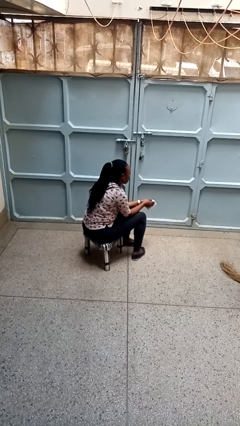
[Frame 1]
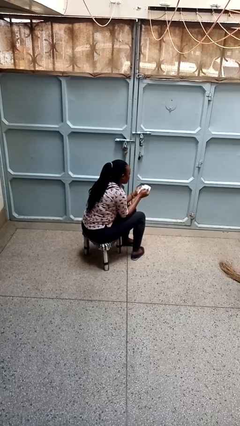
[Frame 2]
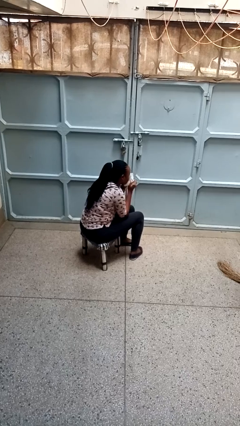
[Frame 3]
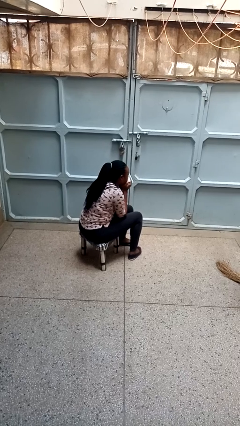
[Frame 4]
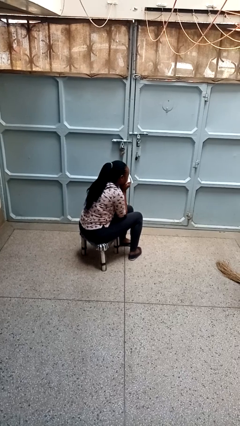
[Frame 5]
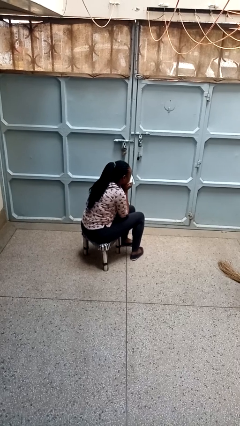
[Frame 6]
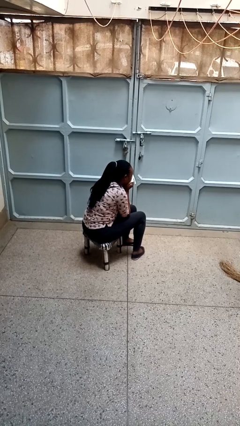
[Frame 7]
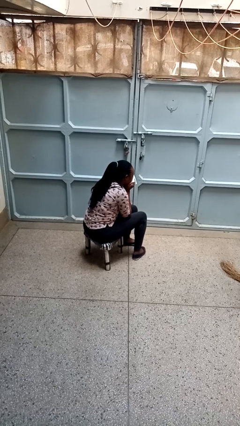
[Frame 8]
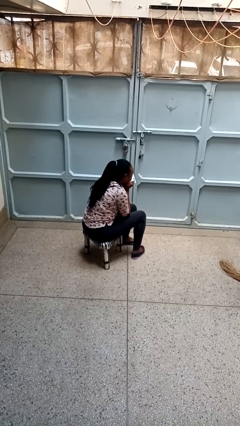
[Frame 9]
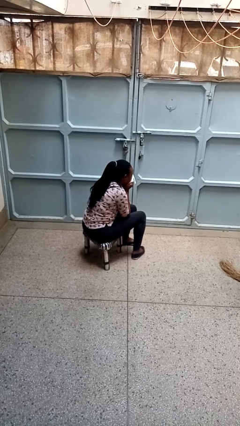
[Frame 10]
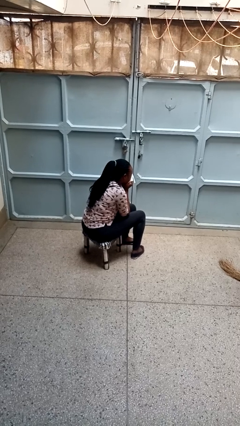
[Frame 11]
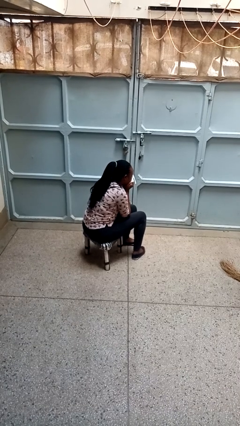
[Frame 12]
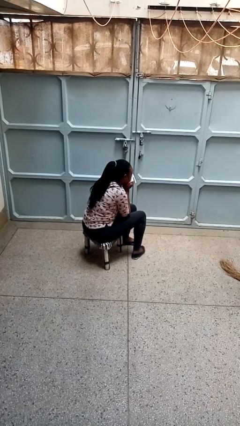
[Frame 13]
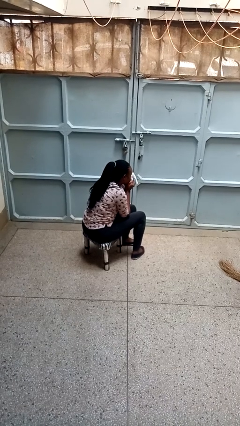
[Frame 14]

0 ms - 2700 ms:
person blows nose

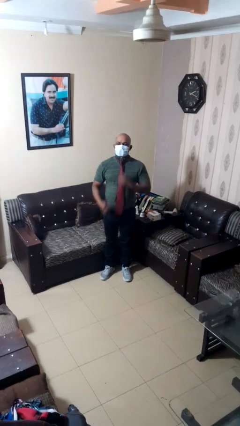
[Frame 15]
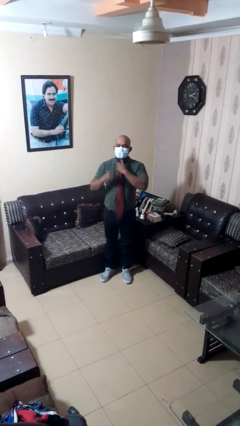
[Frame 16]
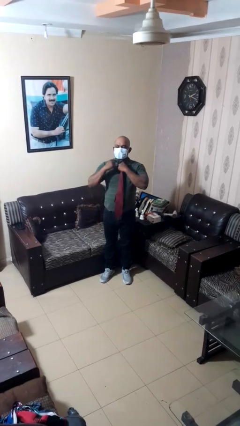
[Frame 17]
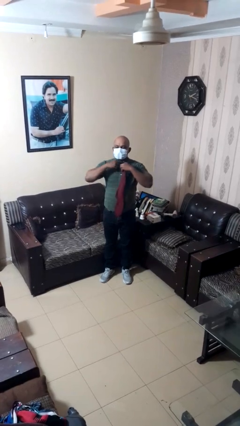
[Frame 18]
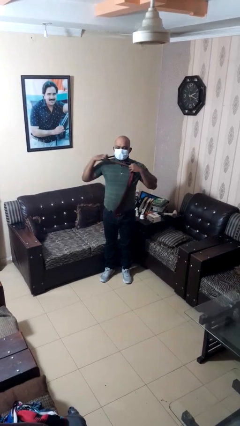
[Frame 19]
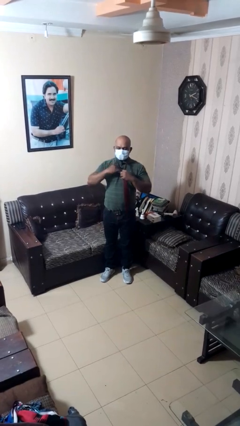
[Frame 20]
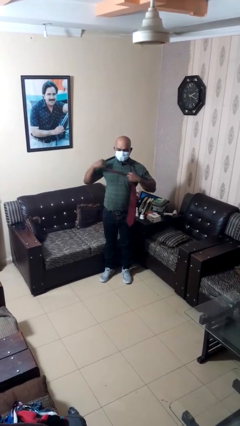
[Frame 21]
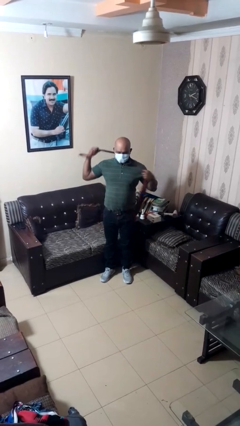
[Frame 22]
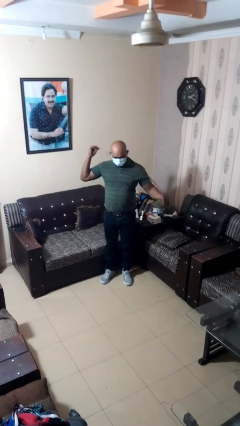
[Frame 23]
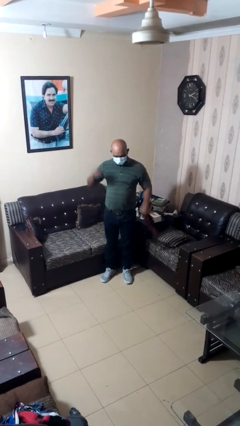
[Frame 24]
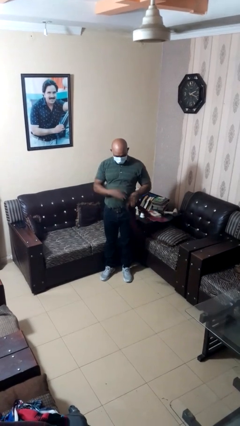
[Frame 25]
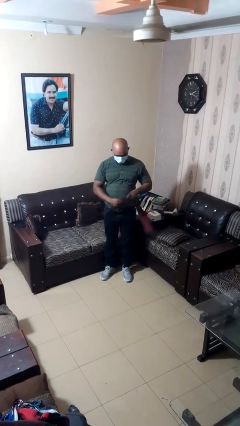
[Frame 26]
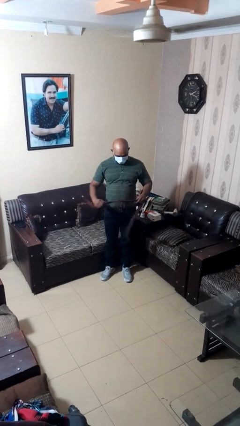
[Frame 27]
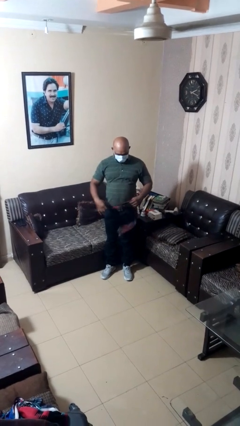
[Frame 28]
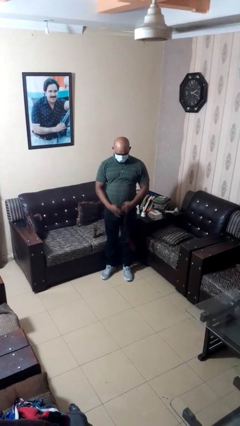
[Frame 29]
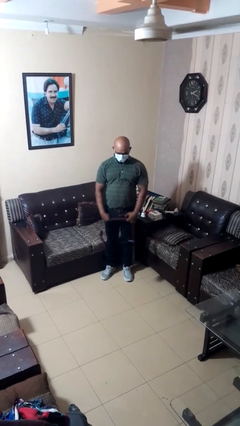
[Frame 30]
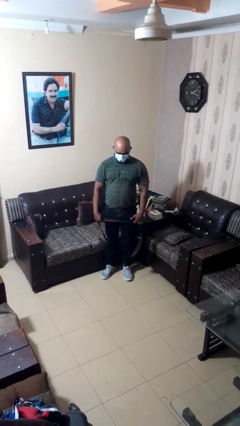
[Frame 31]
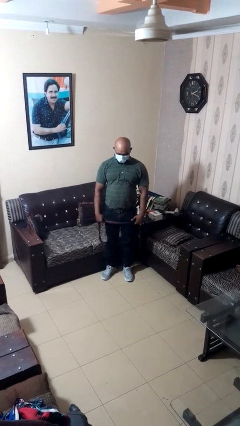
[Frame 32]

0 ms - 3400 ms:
person takes off necktie

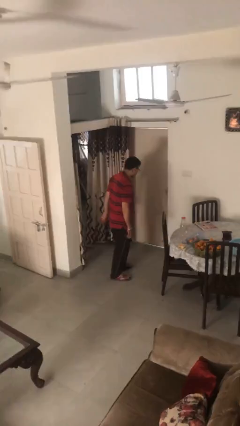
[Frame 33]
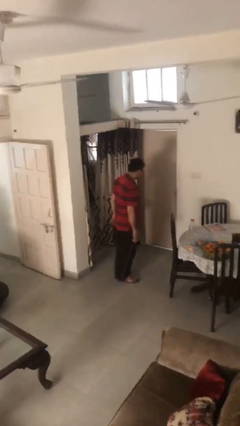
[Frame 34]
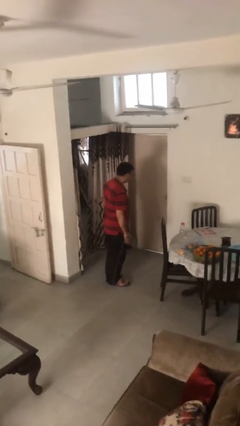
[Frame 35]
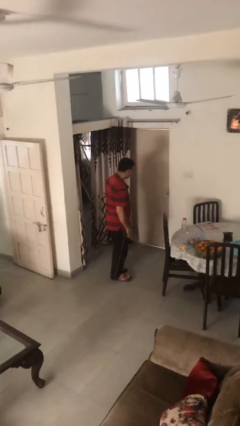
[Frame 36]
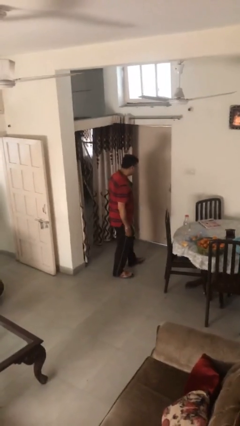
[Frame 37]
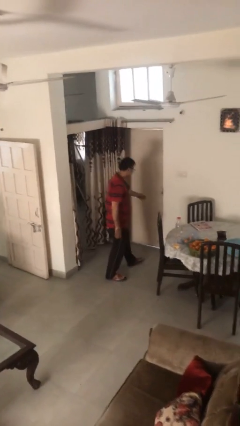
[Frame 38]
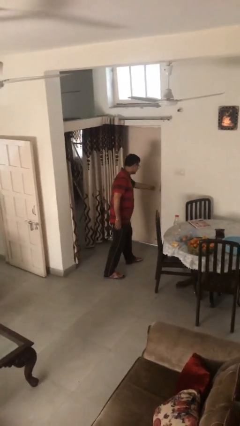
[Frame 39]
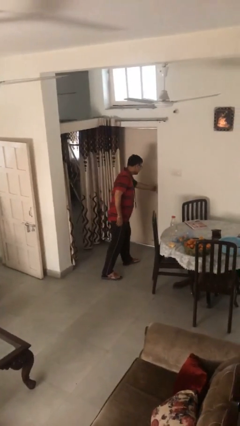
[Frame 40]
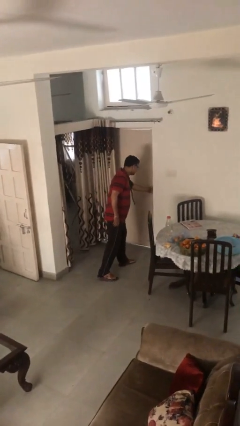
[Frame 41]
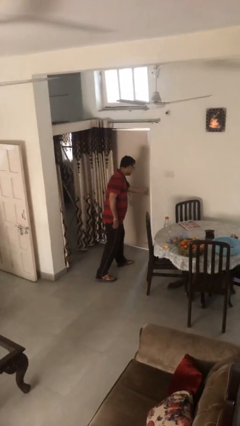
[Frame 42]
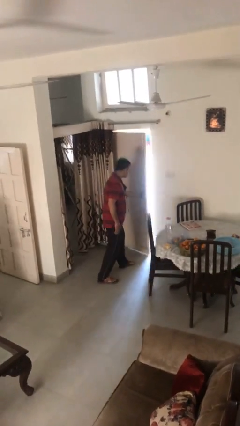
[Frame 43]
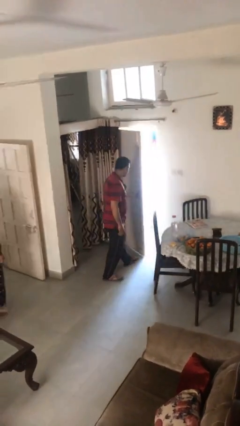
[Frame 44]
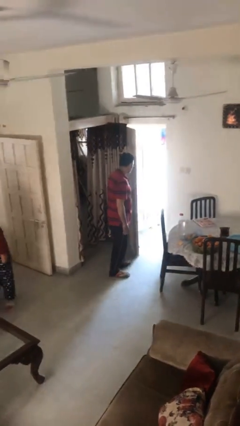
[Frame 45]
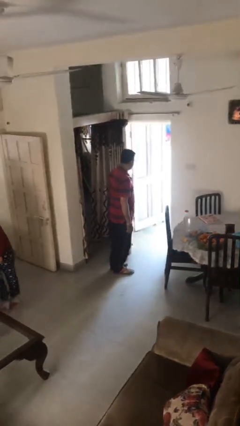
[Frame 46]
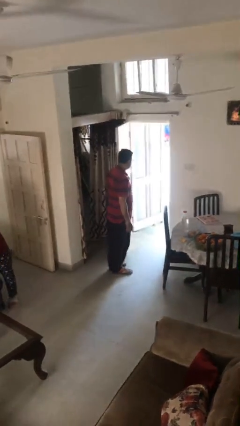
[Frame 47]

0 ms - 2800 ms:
person opens facility door

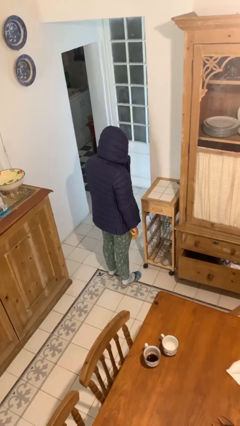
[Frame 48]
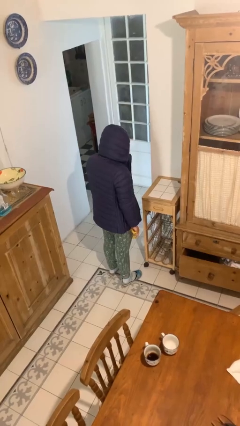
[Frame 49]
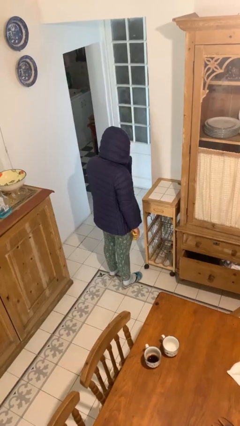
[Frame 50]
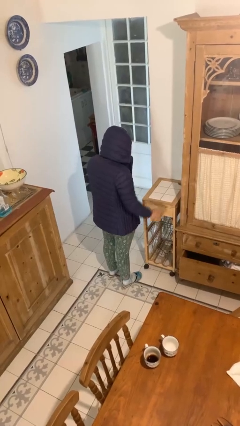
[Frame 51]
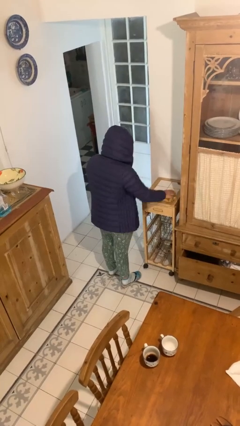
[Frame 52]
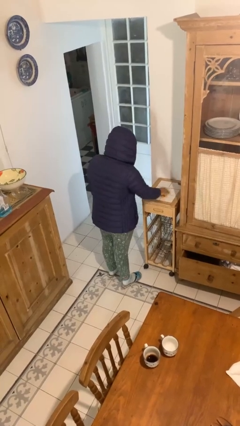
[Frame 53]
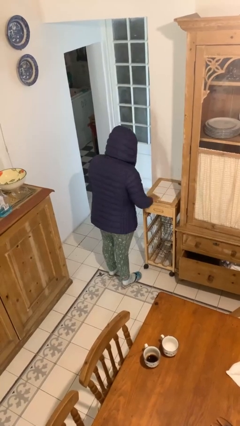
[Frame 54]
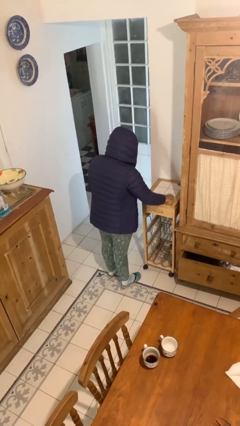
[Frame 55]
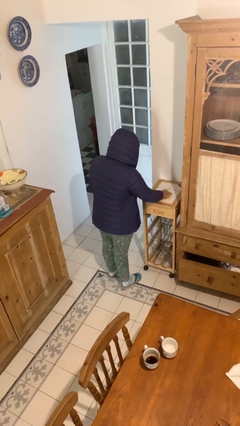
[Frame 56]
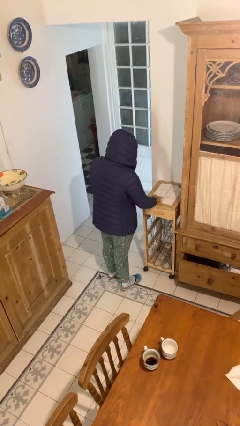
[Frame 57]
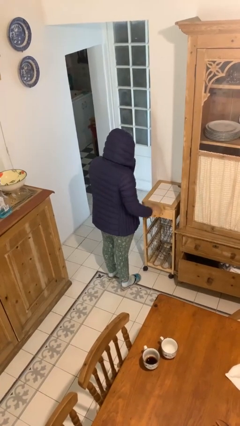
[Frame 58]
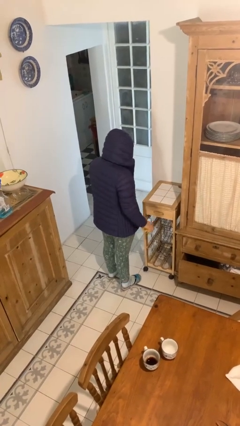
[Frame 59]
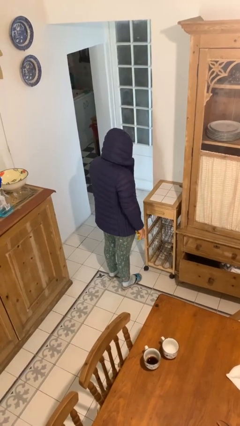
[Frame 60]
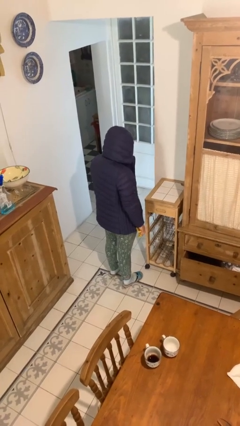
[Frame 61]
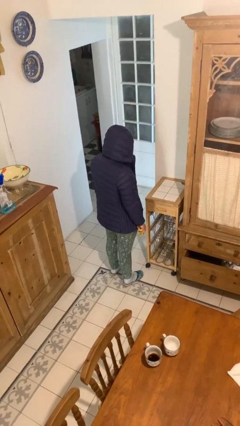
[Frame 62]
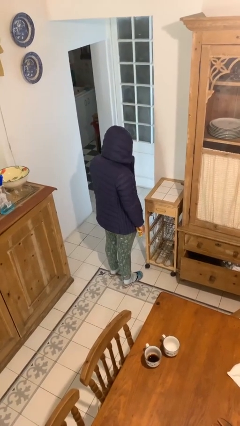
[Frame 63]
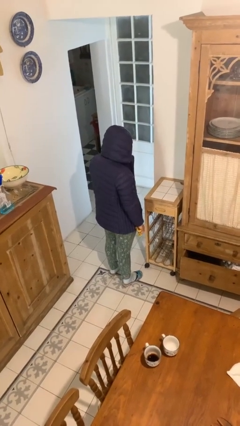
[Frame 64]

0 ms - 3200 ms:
person cleans table with rag

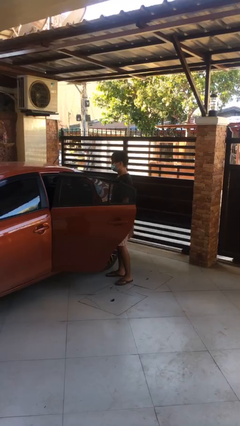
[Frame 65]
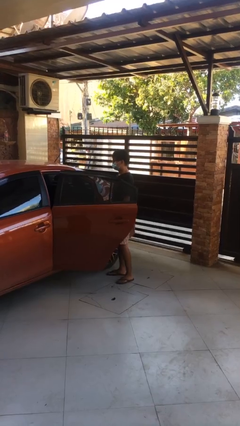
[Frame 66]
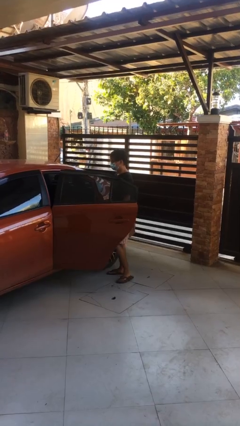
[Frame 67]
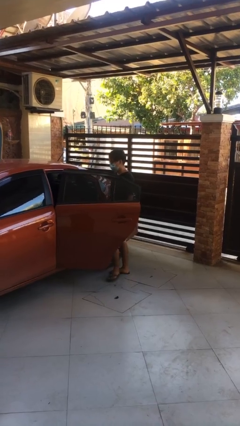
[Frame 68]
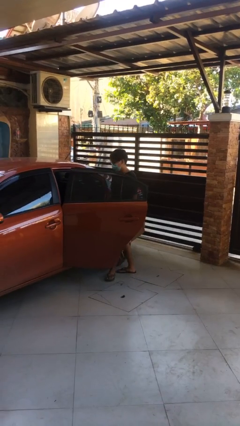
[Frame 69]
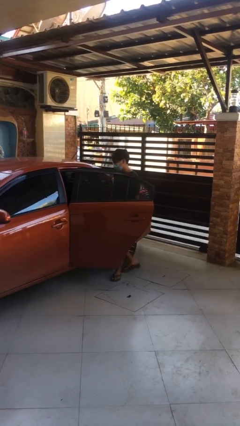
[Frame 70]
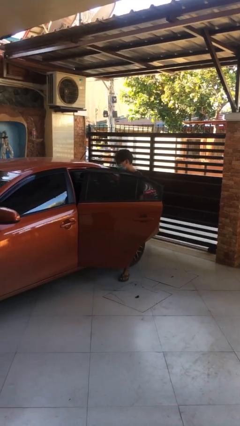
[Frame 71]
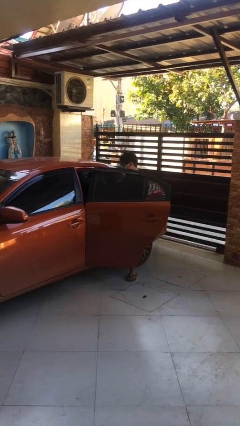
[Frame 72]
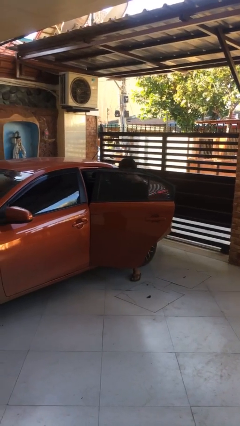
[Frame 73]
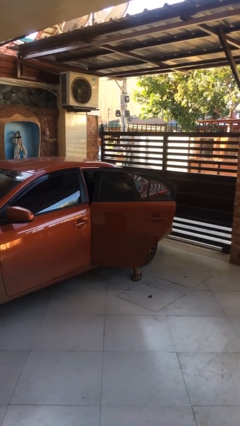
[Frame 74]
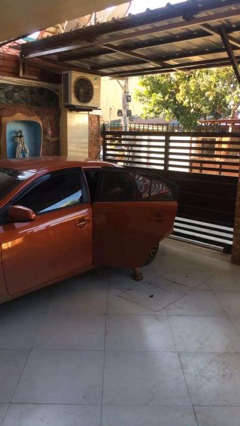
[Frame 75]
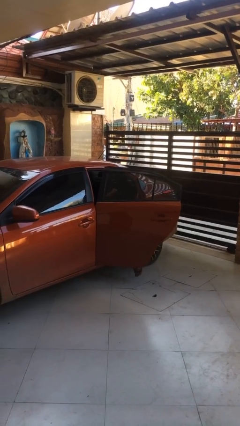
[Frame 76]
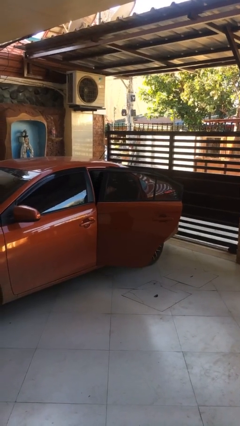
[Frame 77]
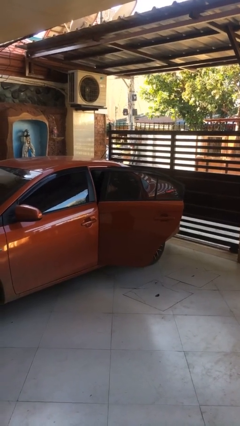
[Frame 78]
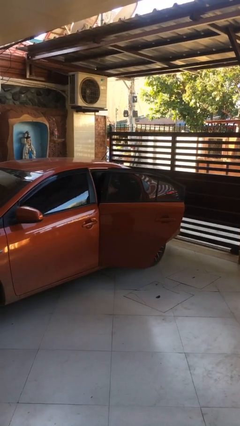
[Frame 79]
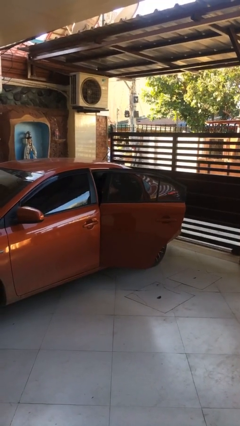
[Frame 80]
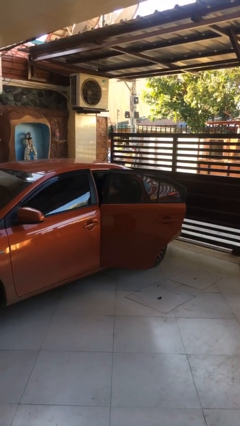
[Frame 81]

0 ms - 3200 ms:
person enters car

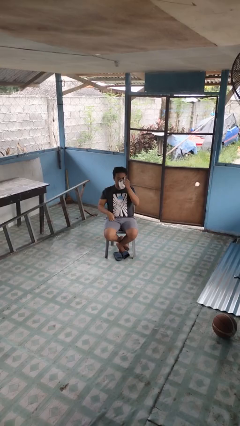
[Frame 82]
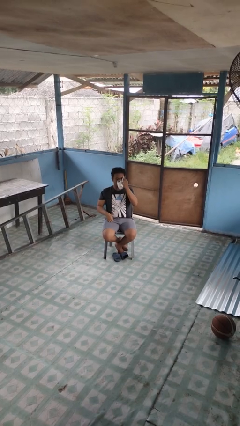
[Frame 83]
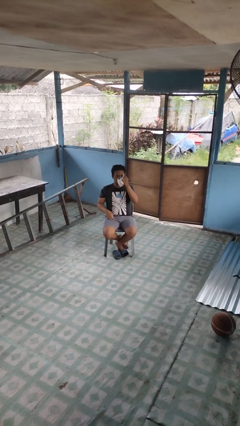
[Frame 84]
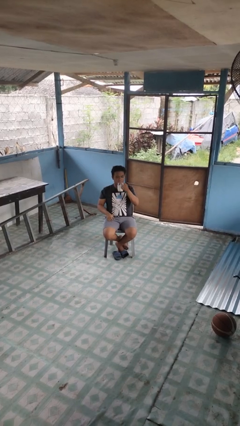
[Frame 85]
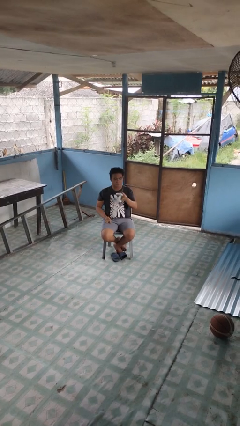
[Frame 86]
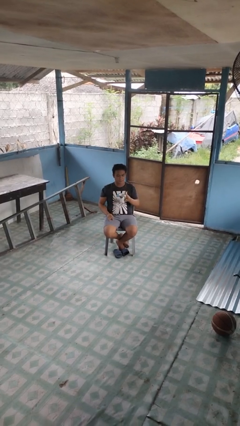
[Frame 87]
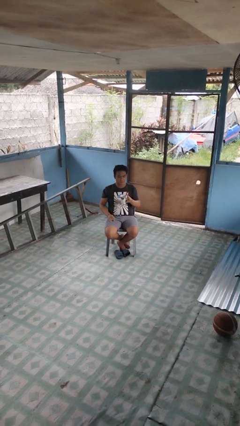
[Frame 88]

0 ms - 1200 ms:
person drinks from mug

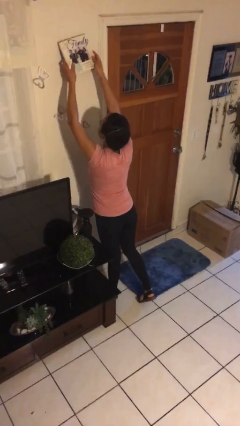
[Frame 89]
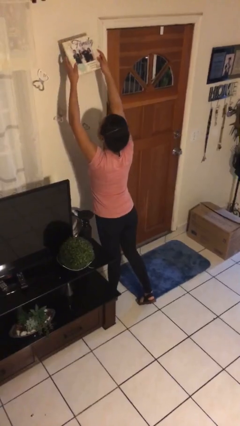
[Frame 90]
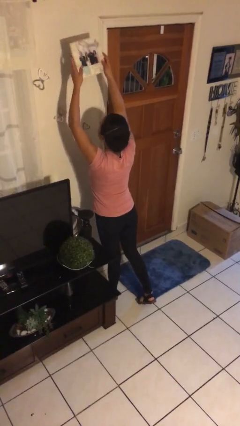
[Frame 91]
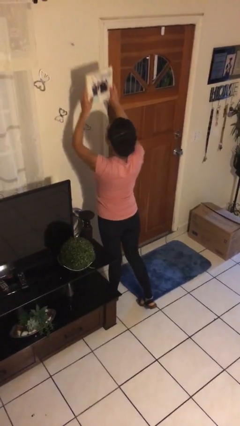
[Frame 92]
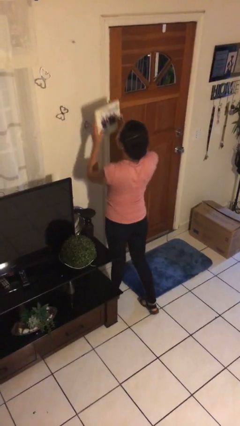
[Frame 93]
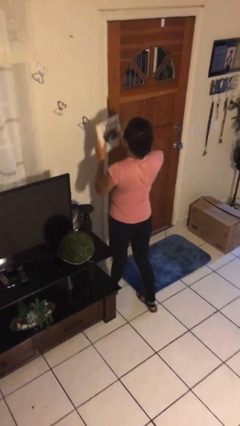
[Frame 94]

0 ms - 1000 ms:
person takes down picture frame
